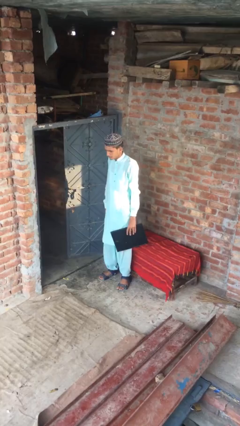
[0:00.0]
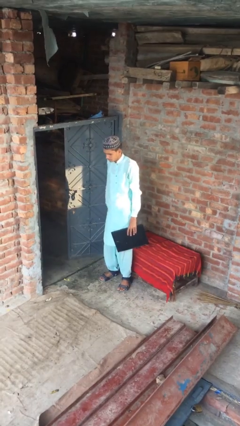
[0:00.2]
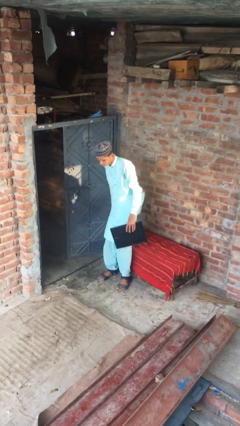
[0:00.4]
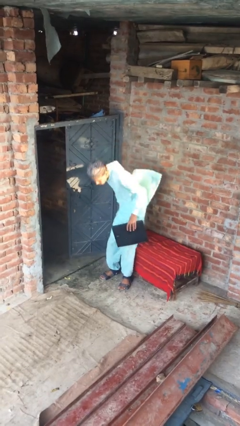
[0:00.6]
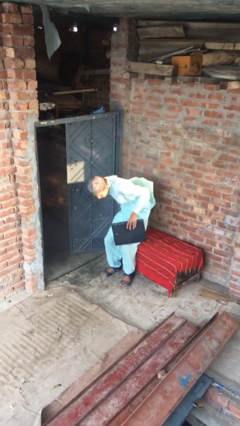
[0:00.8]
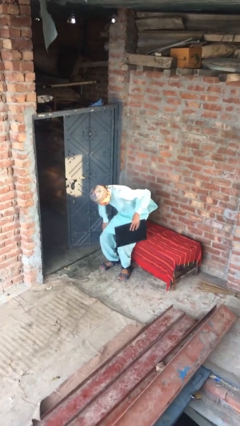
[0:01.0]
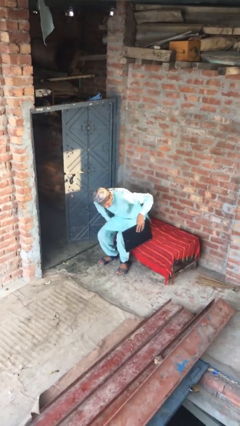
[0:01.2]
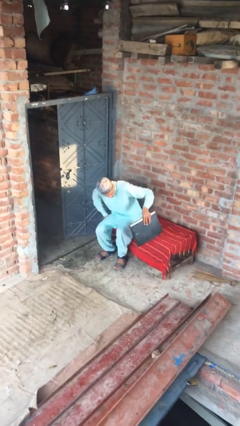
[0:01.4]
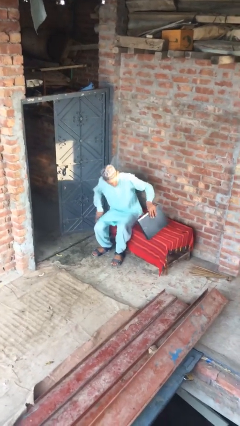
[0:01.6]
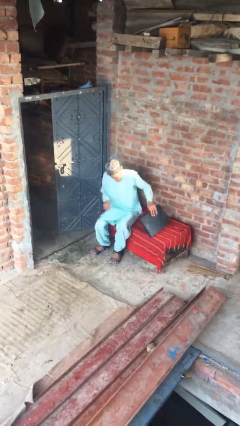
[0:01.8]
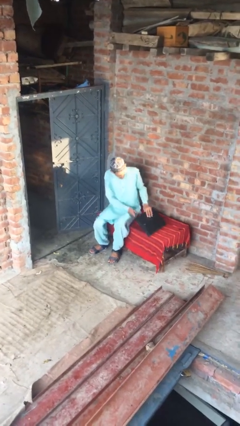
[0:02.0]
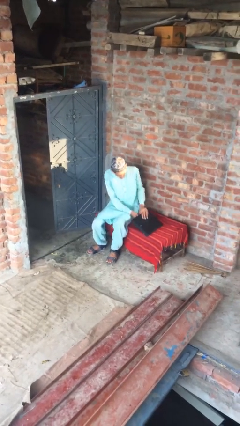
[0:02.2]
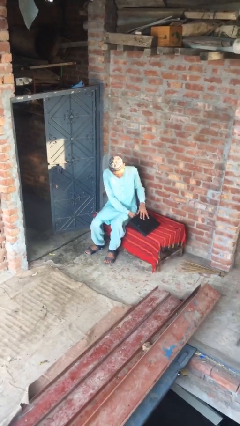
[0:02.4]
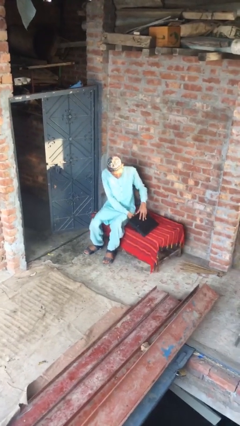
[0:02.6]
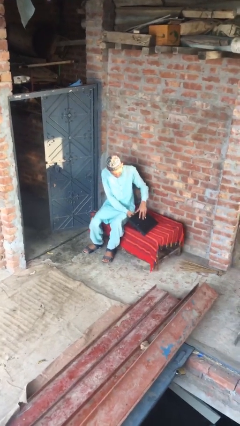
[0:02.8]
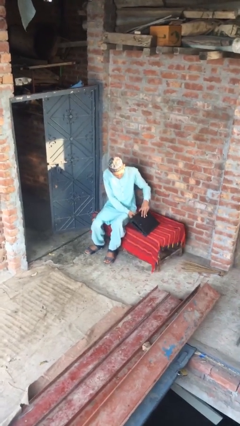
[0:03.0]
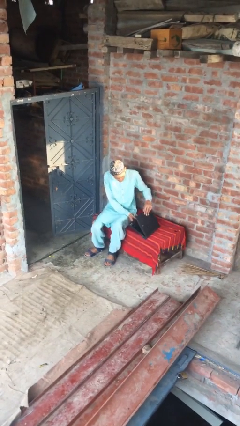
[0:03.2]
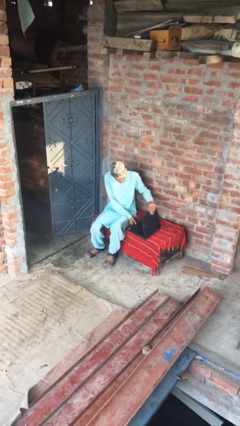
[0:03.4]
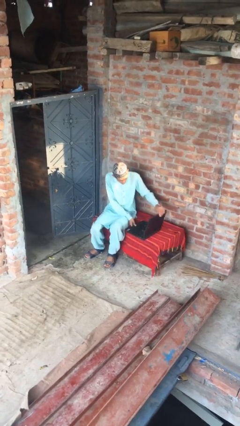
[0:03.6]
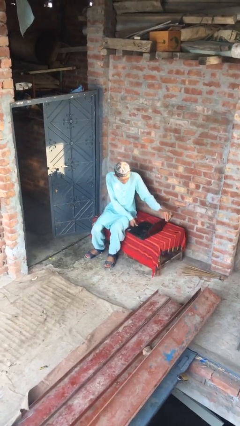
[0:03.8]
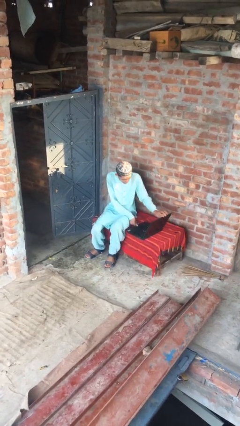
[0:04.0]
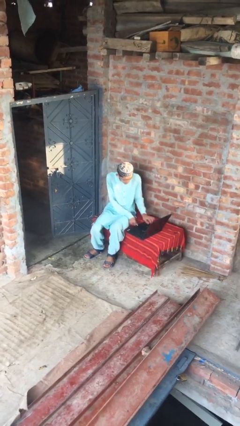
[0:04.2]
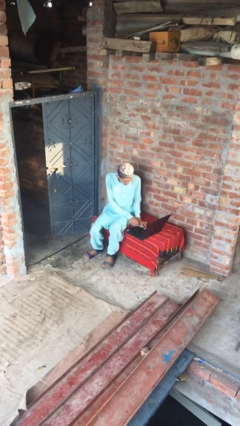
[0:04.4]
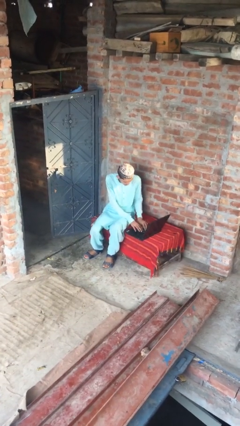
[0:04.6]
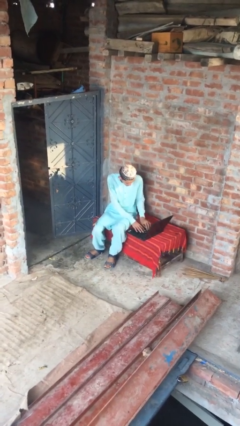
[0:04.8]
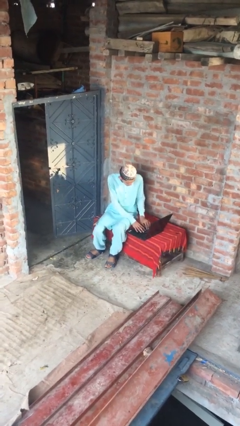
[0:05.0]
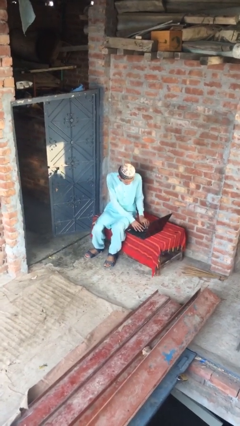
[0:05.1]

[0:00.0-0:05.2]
person sits down

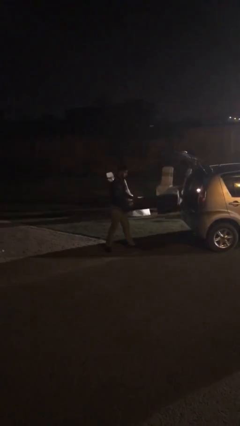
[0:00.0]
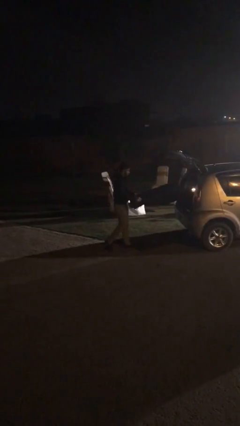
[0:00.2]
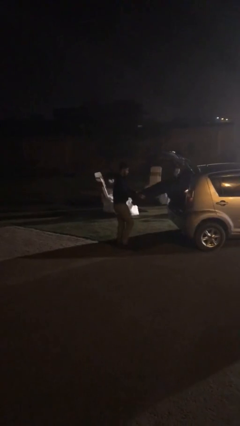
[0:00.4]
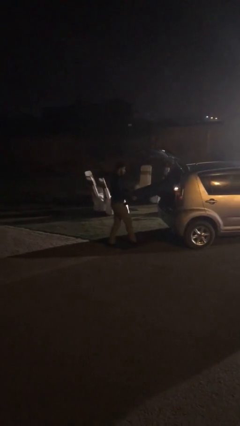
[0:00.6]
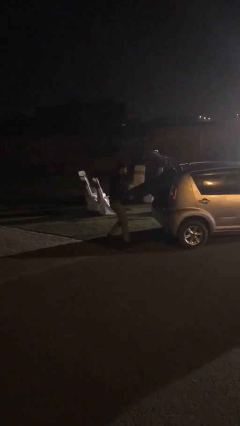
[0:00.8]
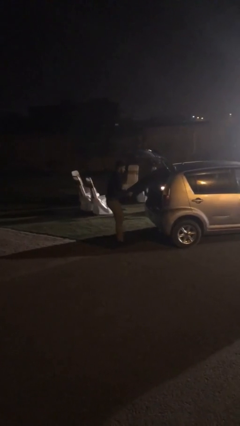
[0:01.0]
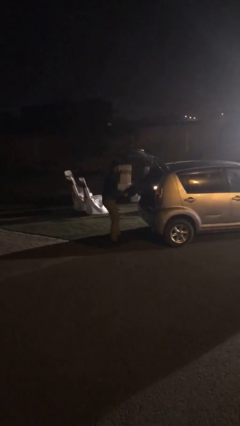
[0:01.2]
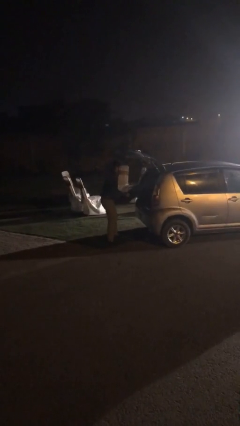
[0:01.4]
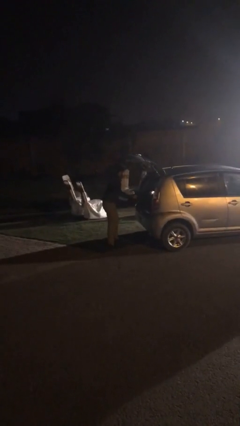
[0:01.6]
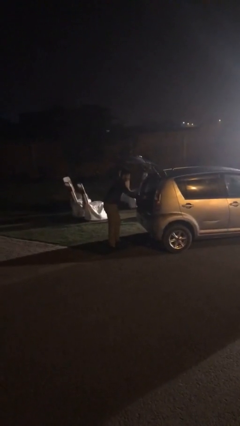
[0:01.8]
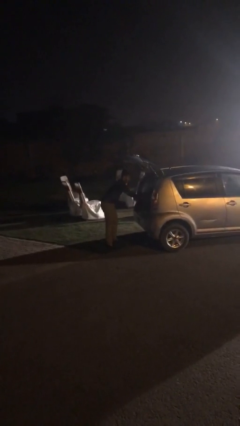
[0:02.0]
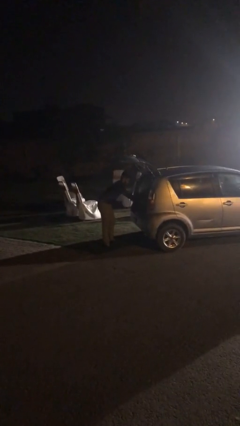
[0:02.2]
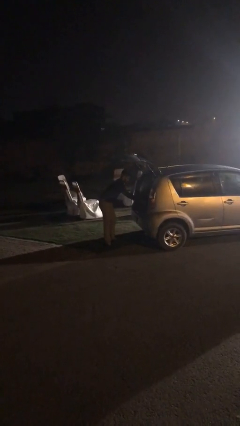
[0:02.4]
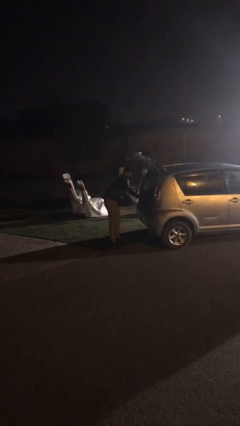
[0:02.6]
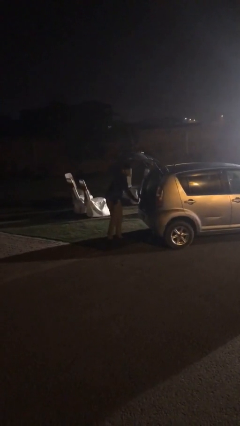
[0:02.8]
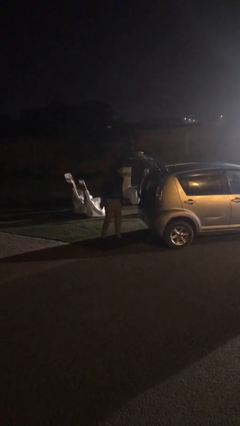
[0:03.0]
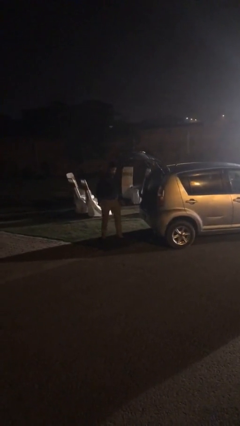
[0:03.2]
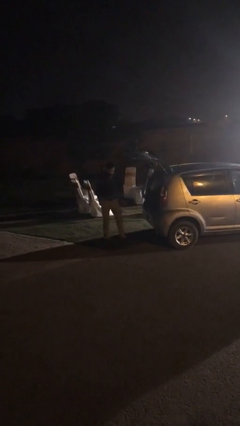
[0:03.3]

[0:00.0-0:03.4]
person loads car

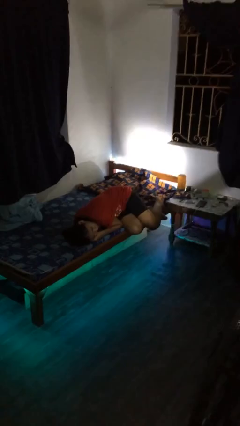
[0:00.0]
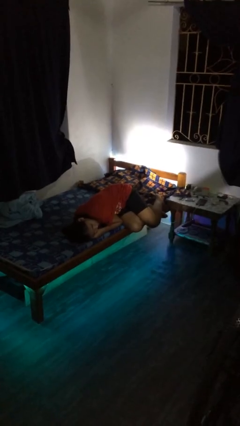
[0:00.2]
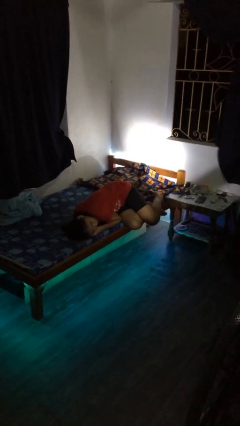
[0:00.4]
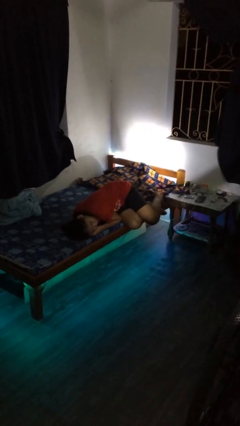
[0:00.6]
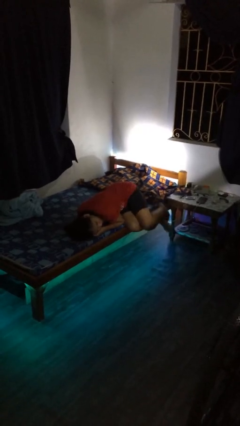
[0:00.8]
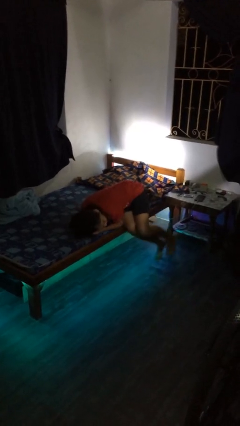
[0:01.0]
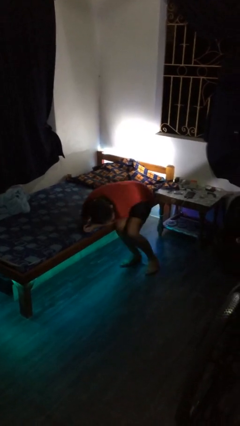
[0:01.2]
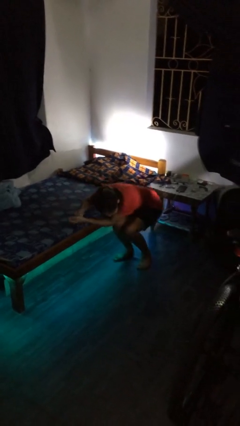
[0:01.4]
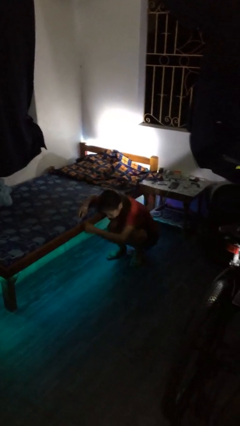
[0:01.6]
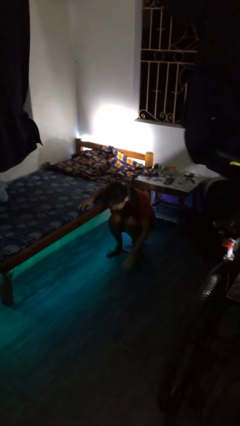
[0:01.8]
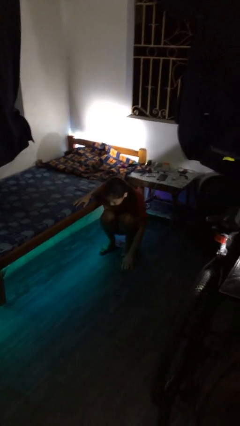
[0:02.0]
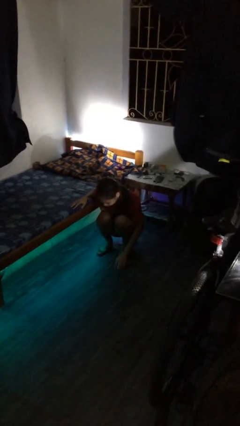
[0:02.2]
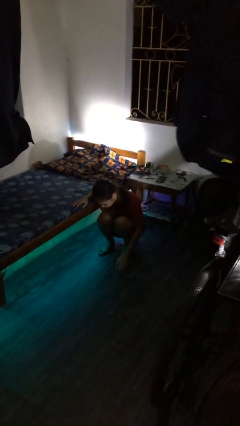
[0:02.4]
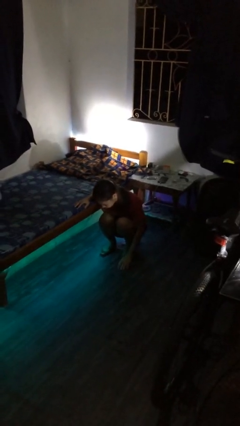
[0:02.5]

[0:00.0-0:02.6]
person falls from bed

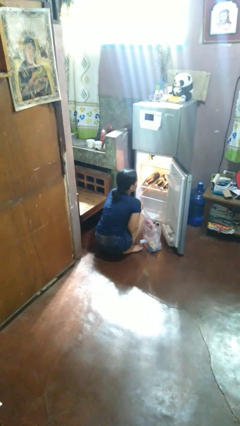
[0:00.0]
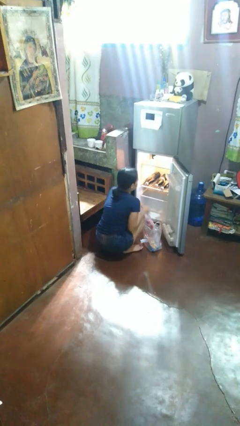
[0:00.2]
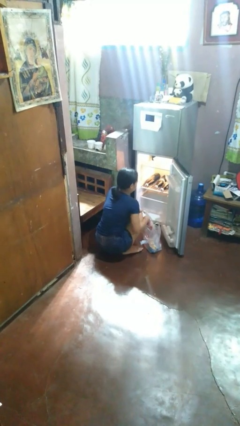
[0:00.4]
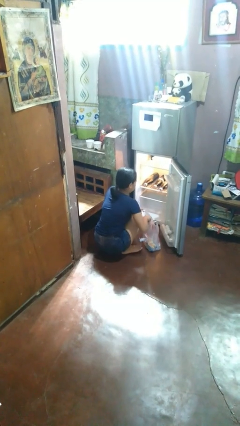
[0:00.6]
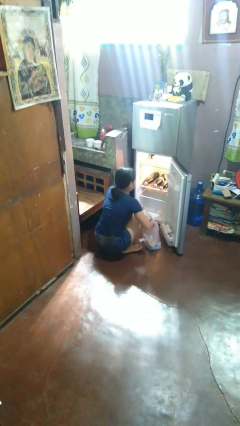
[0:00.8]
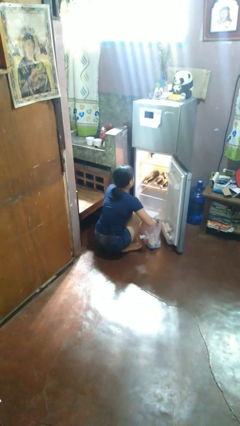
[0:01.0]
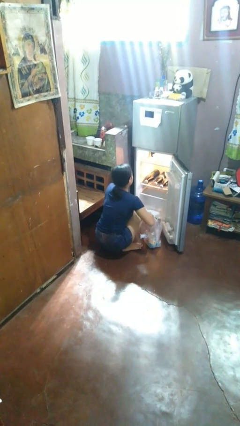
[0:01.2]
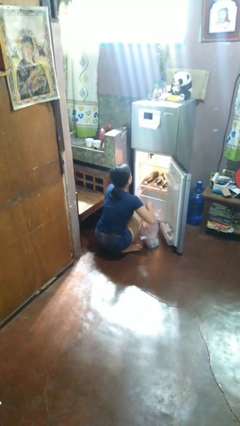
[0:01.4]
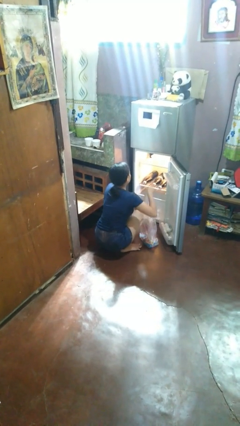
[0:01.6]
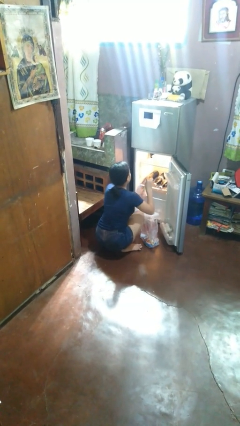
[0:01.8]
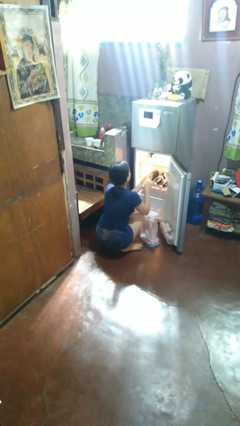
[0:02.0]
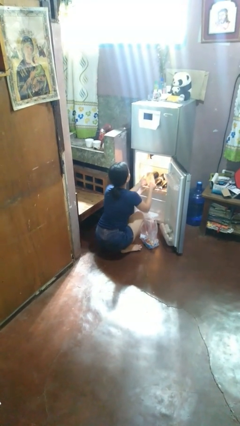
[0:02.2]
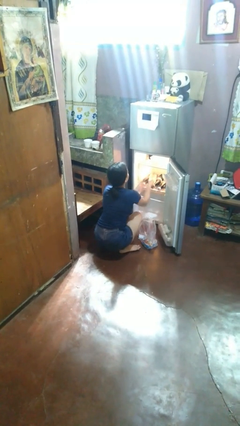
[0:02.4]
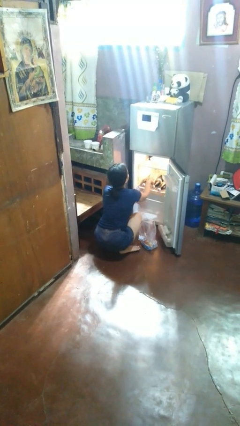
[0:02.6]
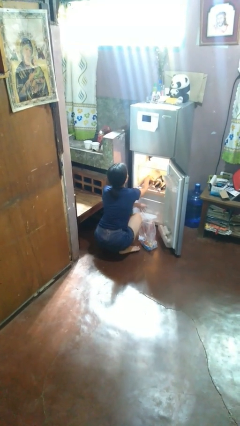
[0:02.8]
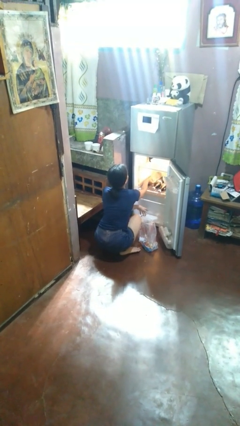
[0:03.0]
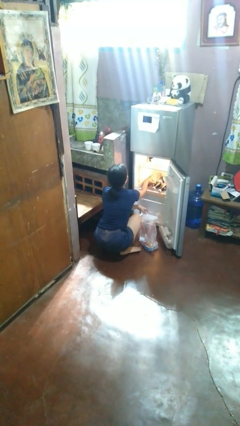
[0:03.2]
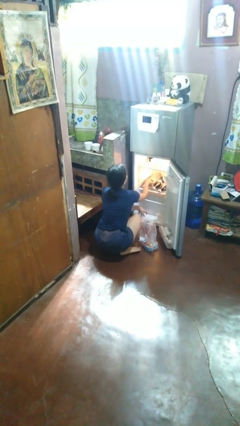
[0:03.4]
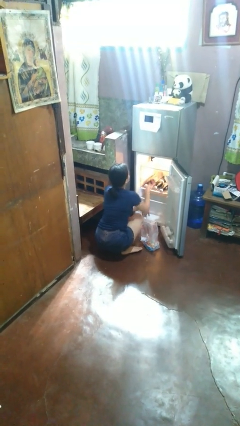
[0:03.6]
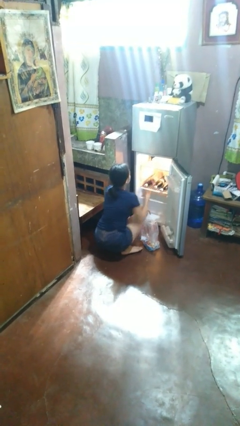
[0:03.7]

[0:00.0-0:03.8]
person loads groceries into refrigerator

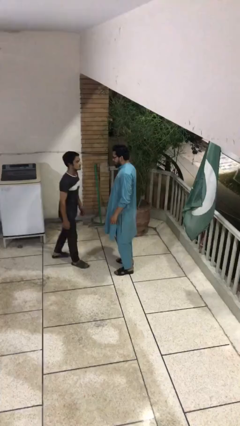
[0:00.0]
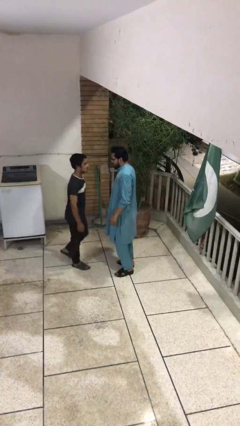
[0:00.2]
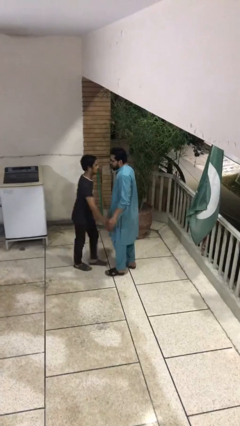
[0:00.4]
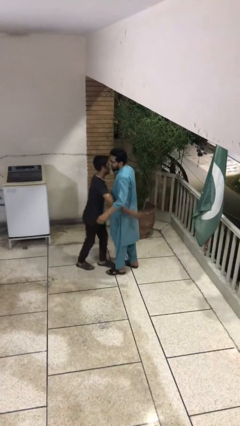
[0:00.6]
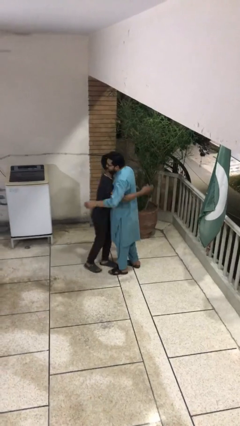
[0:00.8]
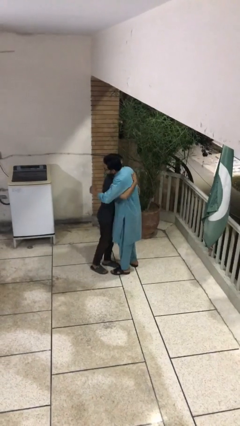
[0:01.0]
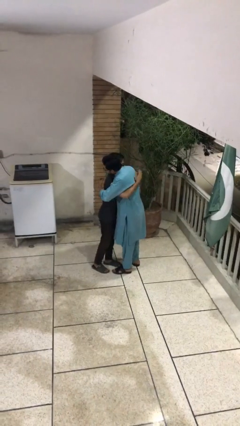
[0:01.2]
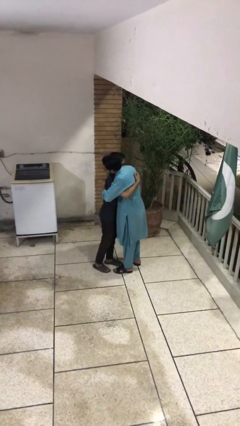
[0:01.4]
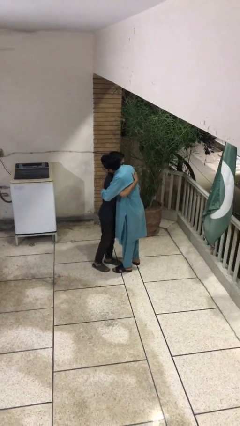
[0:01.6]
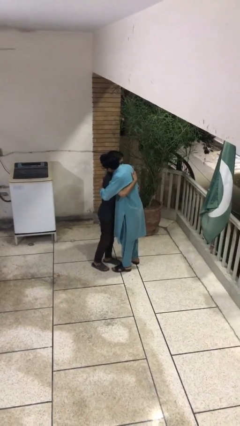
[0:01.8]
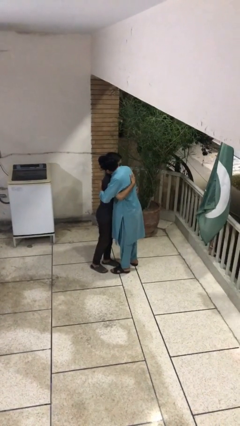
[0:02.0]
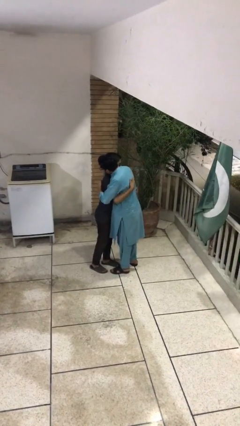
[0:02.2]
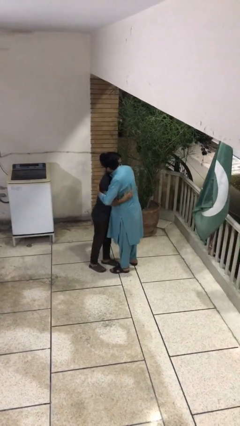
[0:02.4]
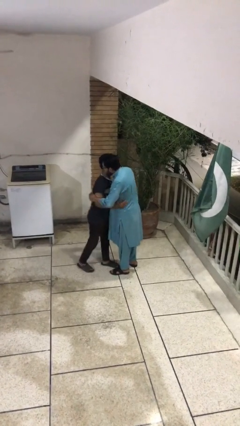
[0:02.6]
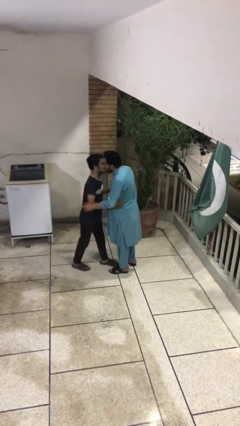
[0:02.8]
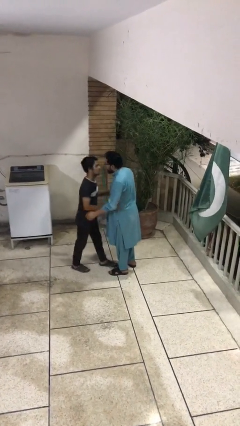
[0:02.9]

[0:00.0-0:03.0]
person embraces person
